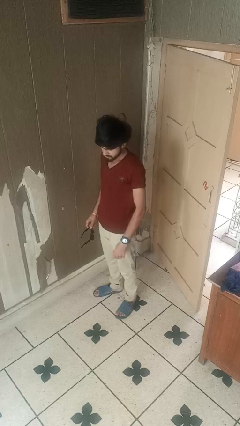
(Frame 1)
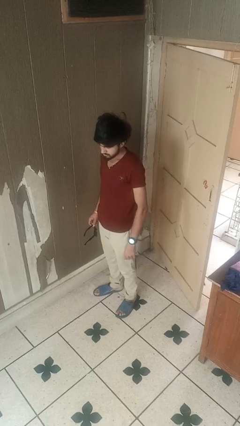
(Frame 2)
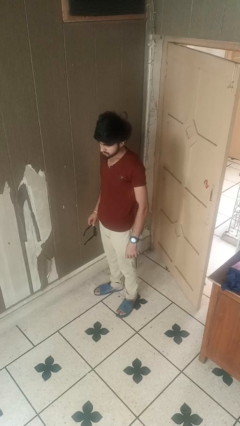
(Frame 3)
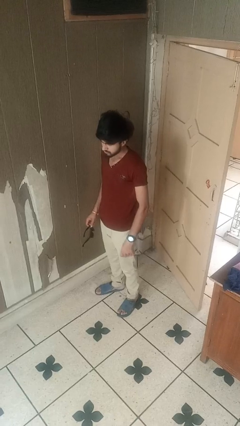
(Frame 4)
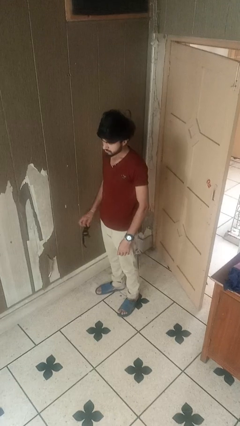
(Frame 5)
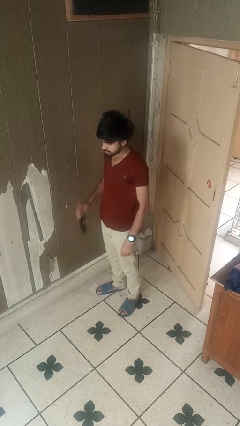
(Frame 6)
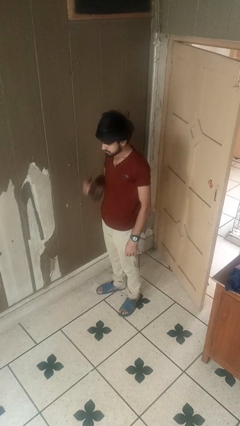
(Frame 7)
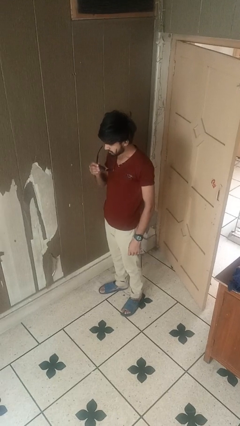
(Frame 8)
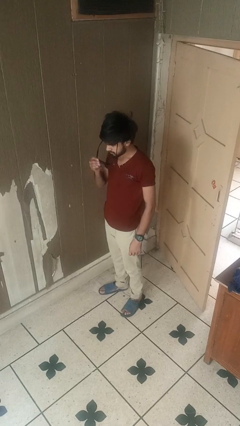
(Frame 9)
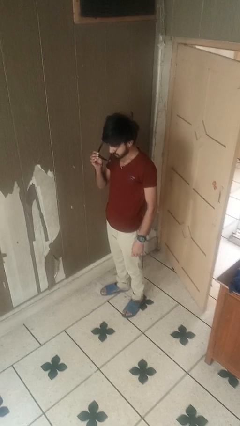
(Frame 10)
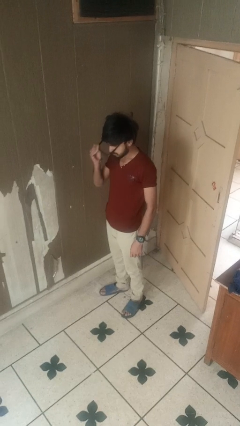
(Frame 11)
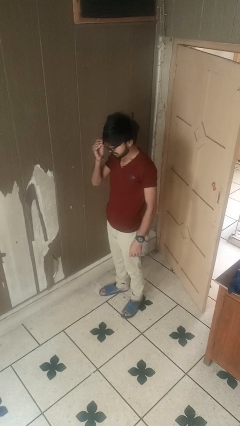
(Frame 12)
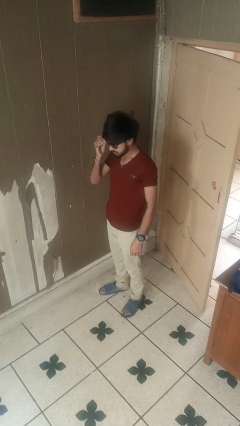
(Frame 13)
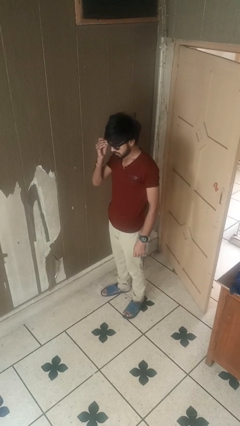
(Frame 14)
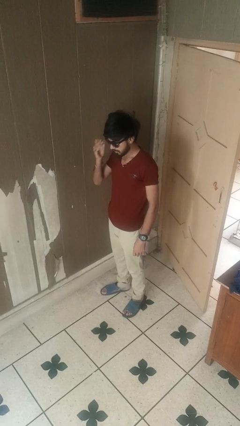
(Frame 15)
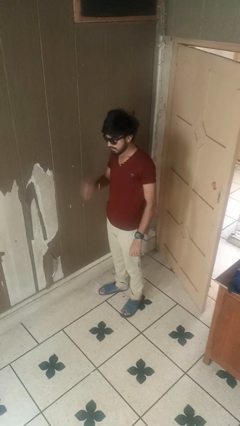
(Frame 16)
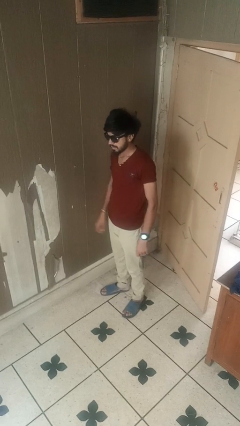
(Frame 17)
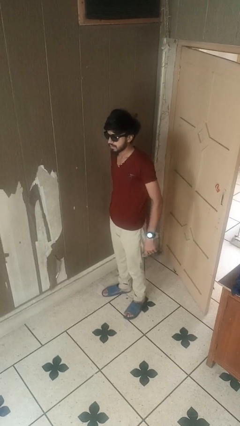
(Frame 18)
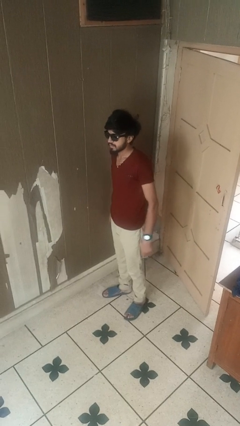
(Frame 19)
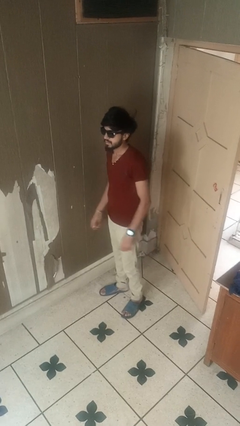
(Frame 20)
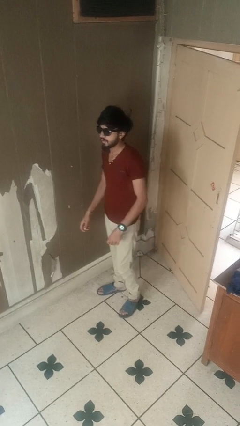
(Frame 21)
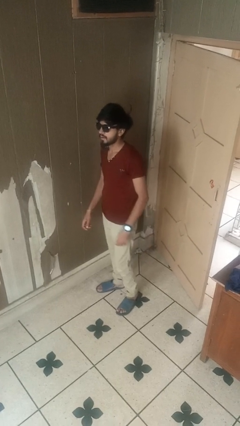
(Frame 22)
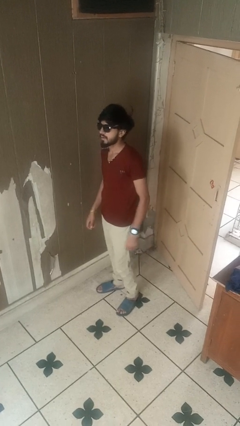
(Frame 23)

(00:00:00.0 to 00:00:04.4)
person puts on sunglasses

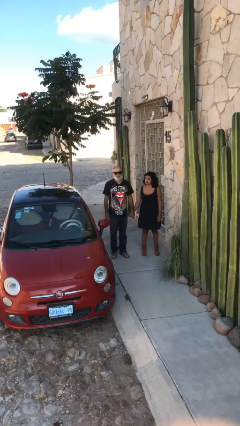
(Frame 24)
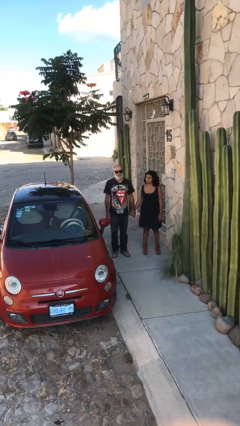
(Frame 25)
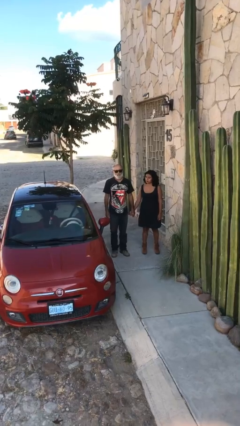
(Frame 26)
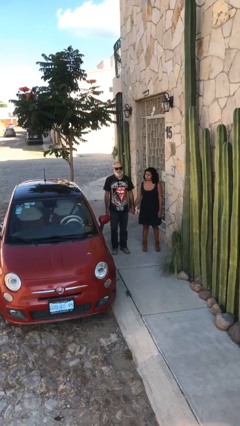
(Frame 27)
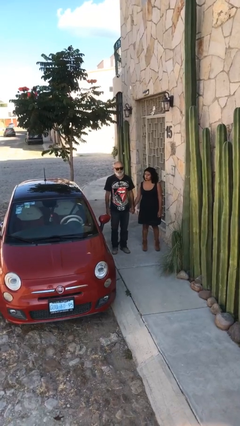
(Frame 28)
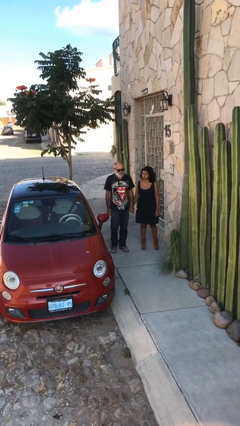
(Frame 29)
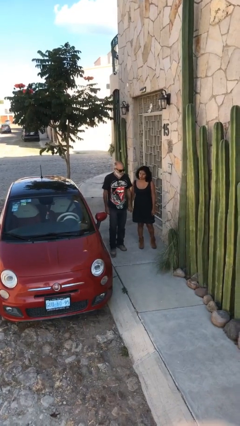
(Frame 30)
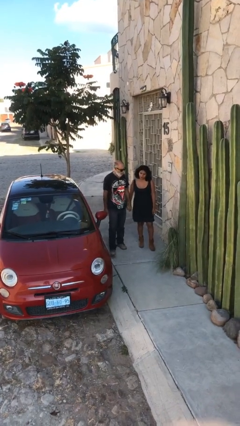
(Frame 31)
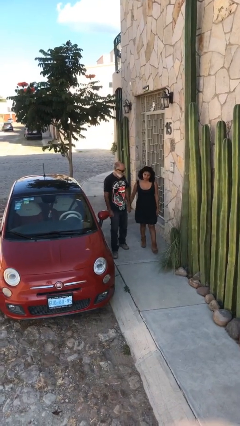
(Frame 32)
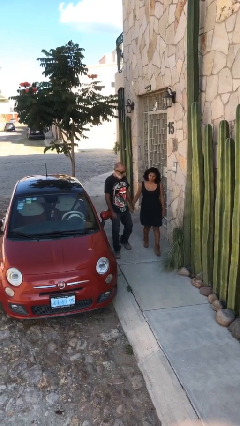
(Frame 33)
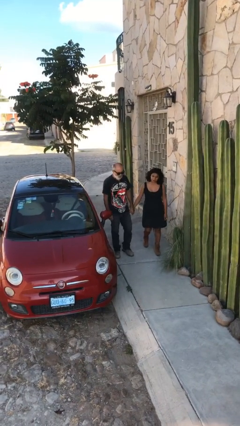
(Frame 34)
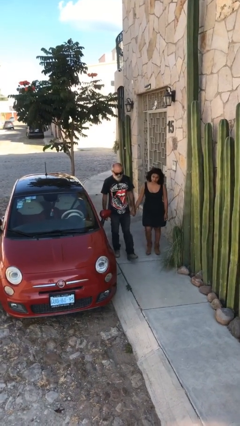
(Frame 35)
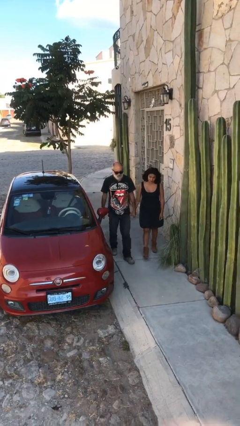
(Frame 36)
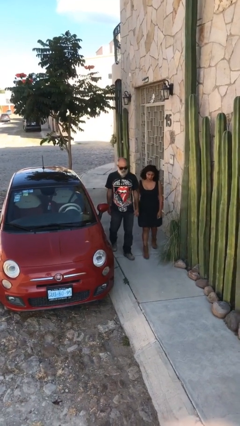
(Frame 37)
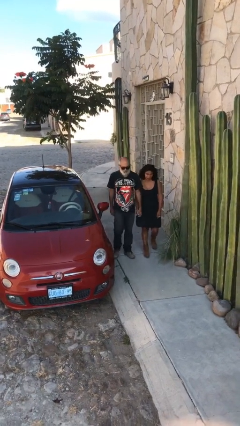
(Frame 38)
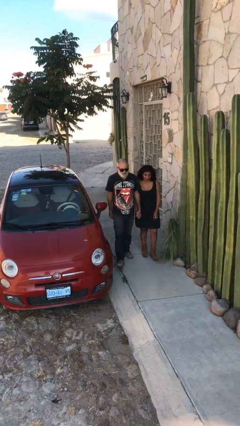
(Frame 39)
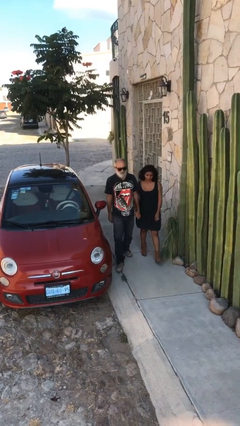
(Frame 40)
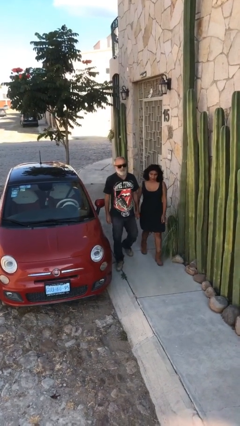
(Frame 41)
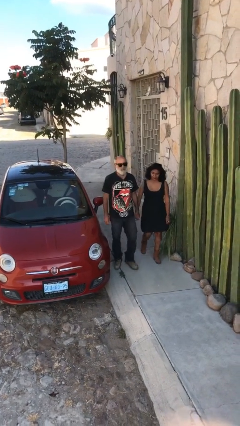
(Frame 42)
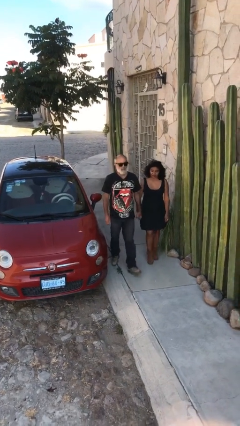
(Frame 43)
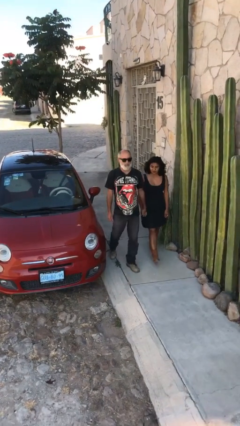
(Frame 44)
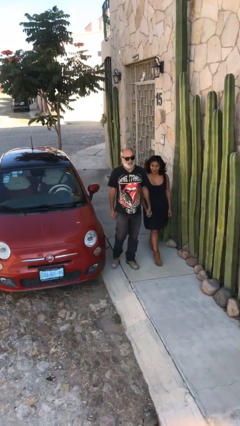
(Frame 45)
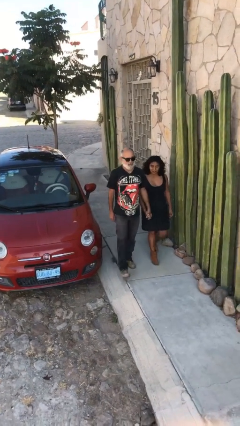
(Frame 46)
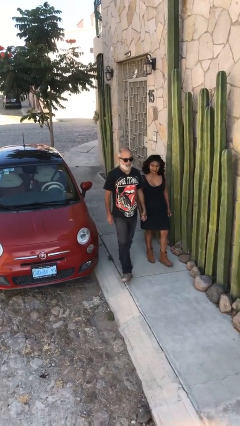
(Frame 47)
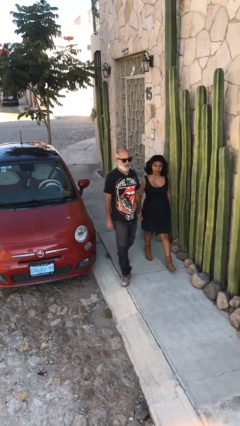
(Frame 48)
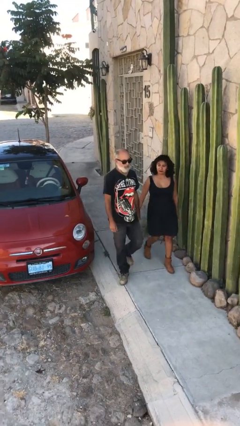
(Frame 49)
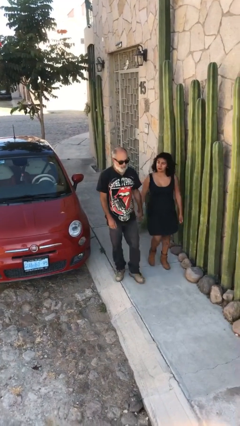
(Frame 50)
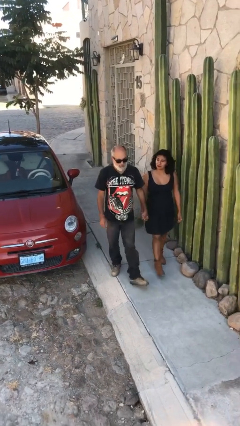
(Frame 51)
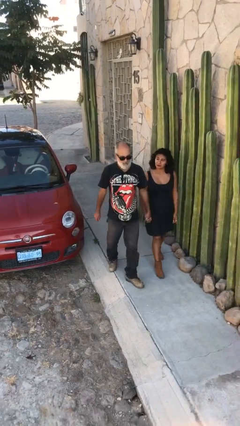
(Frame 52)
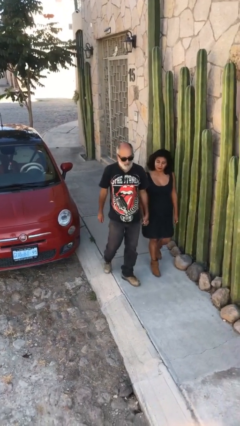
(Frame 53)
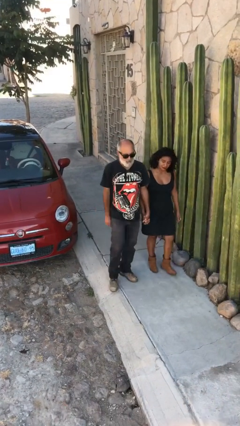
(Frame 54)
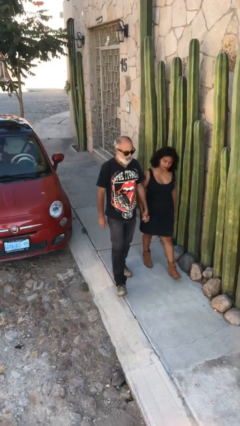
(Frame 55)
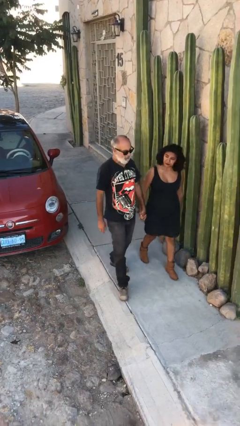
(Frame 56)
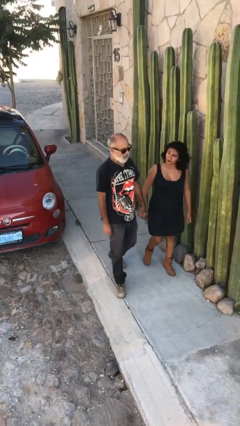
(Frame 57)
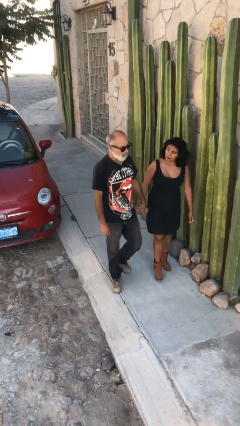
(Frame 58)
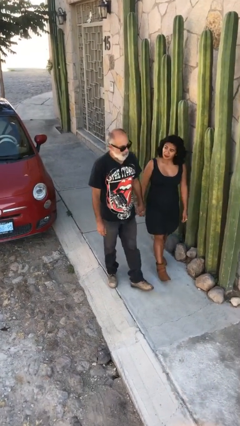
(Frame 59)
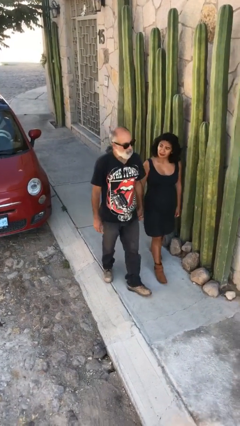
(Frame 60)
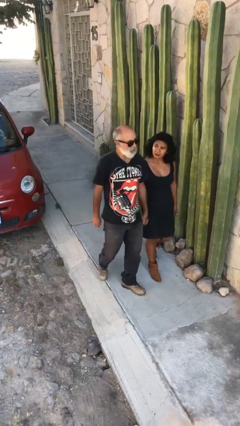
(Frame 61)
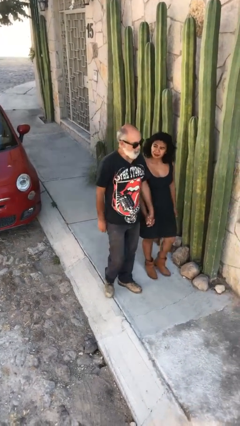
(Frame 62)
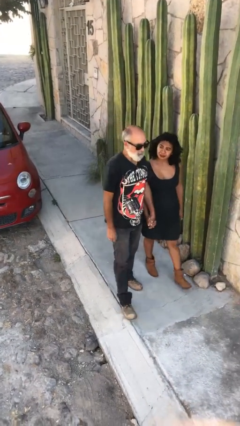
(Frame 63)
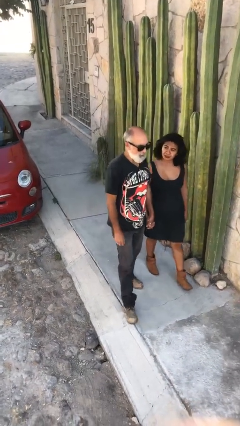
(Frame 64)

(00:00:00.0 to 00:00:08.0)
person holds hand

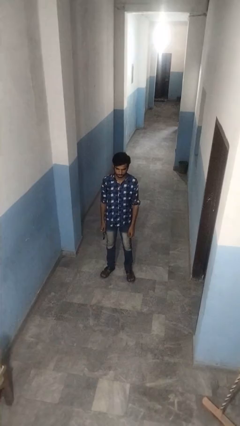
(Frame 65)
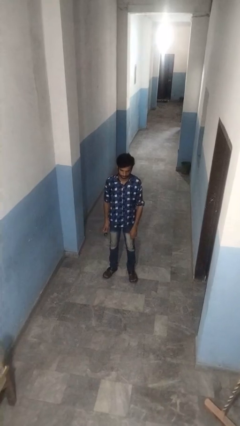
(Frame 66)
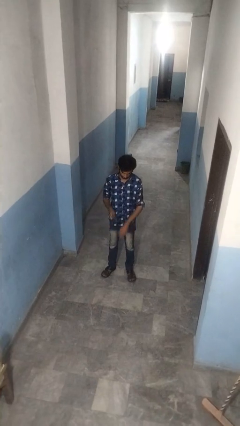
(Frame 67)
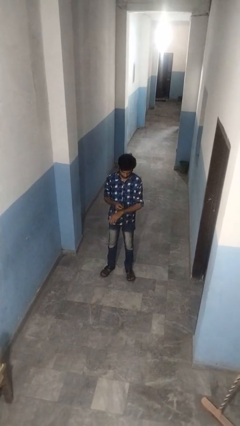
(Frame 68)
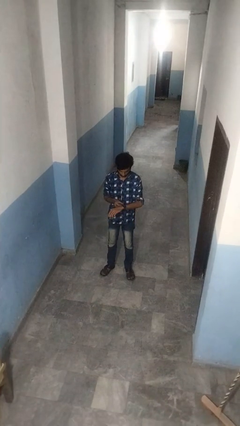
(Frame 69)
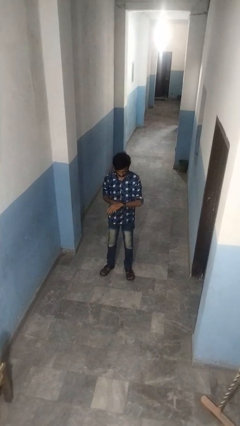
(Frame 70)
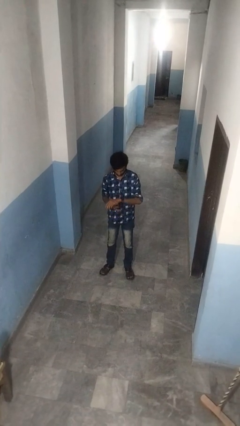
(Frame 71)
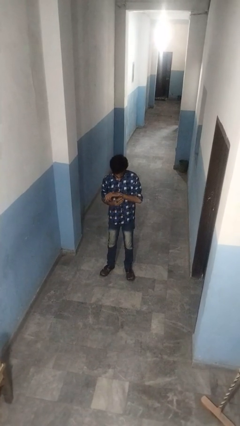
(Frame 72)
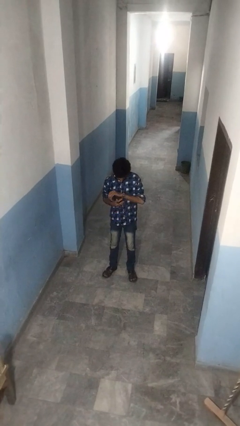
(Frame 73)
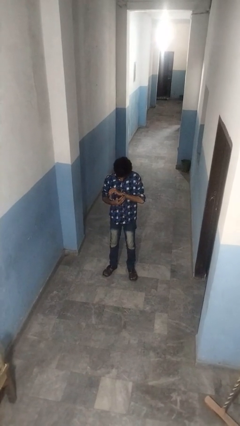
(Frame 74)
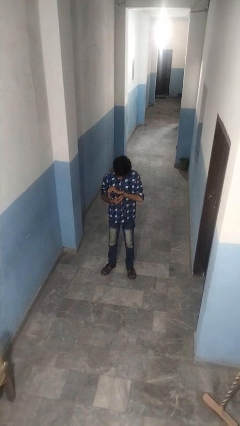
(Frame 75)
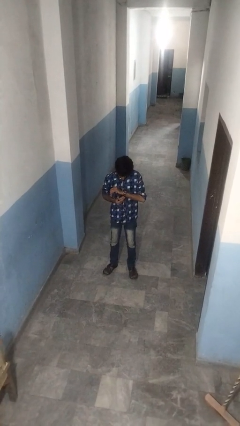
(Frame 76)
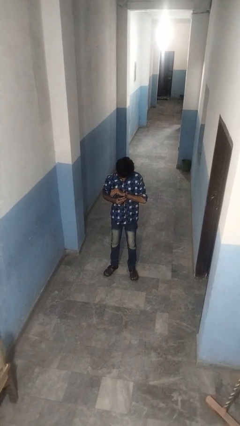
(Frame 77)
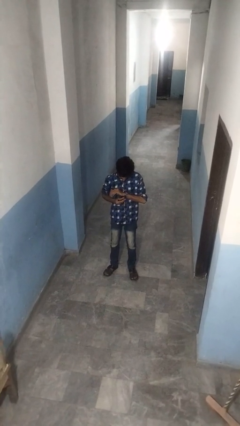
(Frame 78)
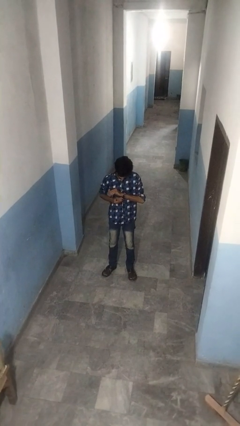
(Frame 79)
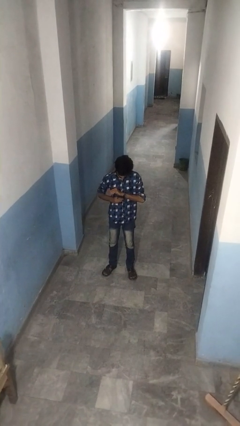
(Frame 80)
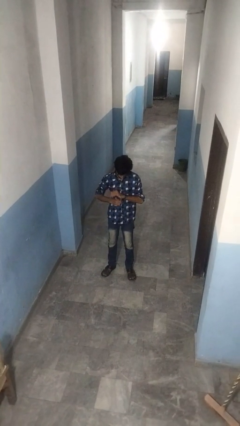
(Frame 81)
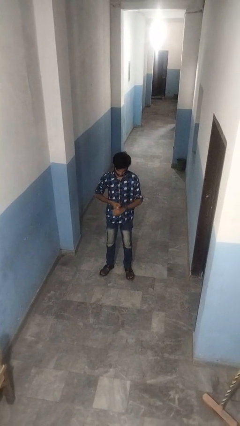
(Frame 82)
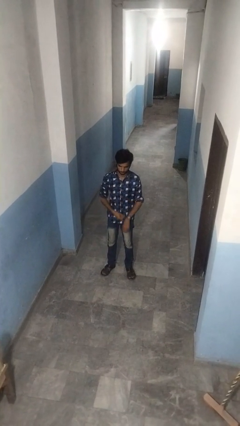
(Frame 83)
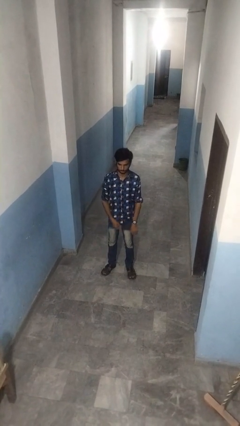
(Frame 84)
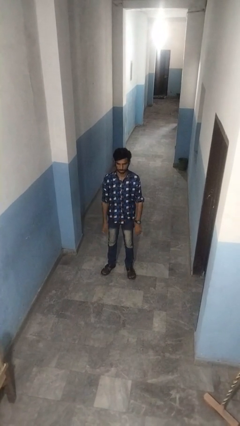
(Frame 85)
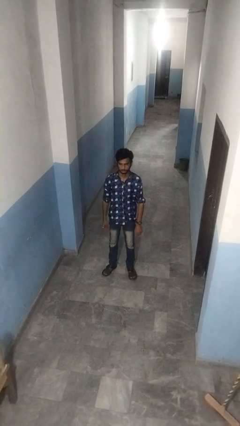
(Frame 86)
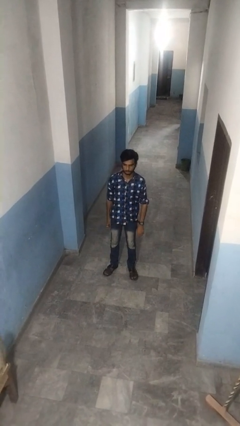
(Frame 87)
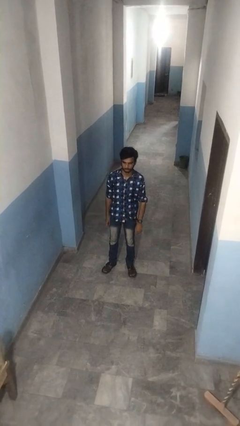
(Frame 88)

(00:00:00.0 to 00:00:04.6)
person puts on wristwatch

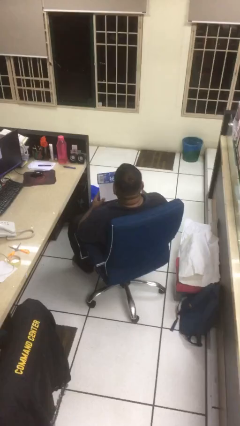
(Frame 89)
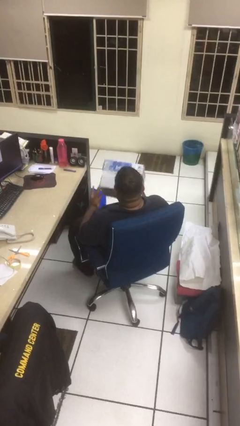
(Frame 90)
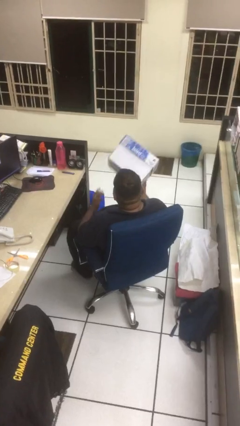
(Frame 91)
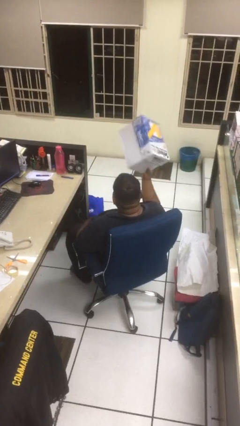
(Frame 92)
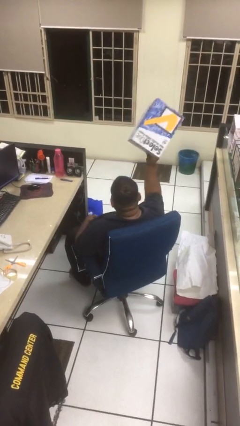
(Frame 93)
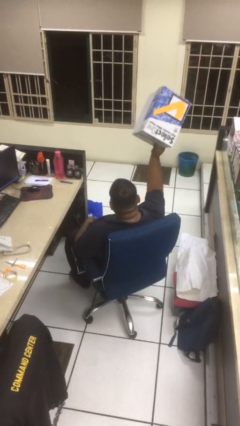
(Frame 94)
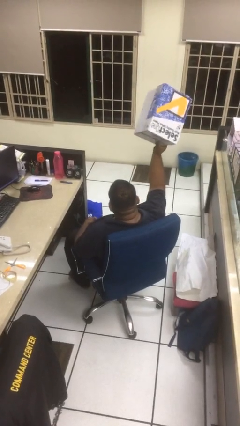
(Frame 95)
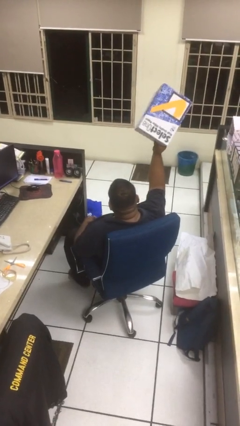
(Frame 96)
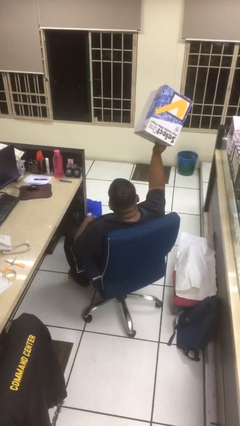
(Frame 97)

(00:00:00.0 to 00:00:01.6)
person holds object above head
